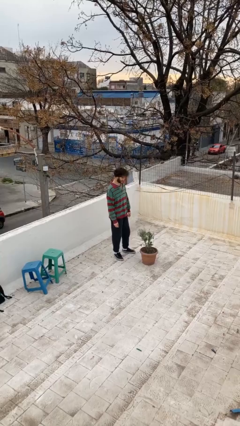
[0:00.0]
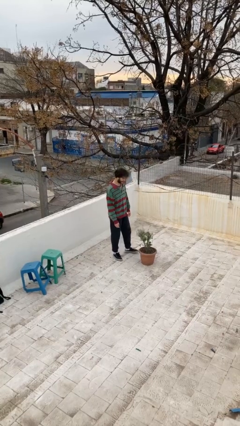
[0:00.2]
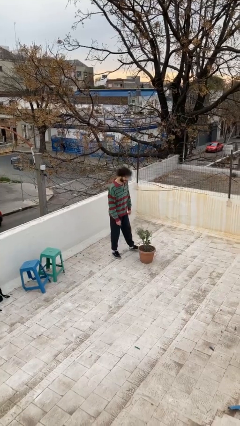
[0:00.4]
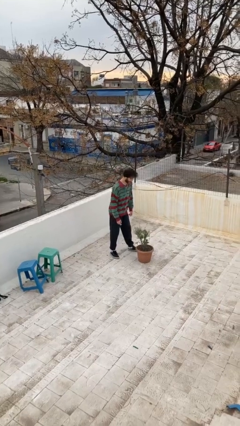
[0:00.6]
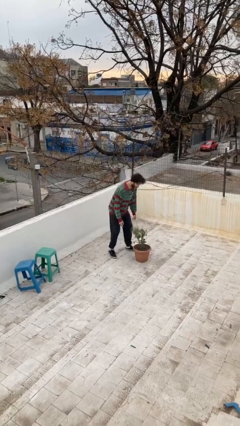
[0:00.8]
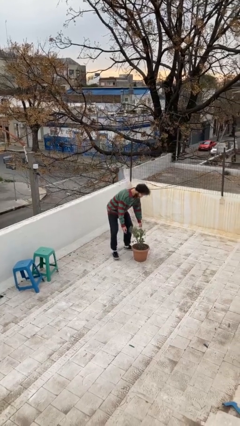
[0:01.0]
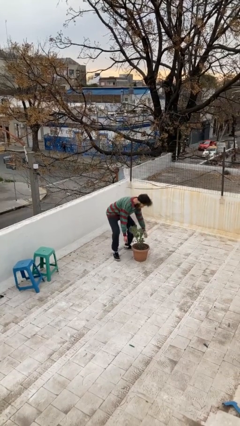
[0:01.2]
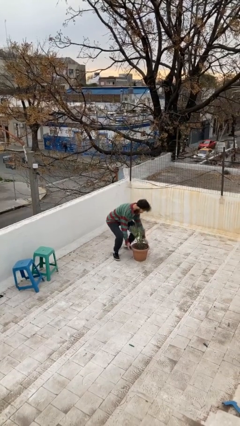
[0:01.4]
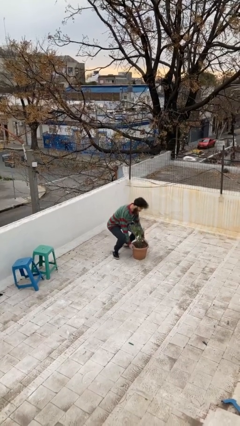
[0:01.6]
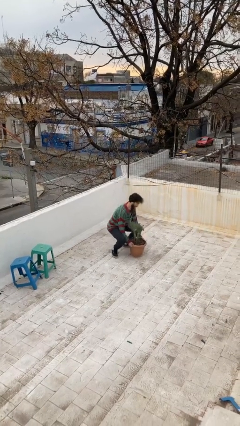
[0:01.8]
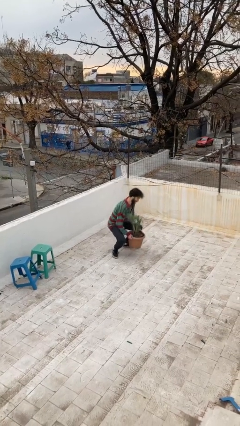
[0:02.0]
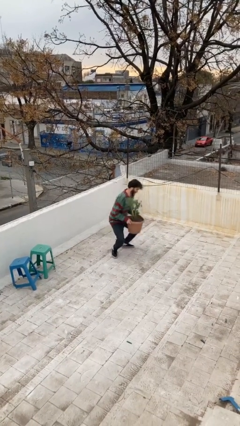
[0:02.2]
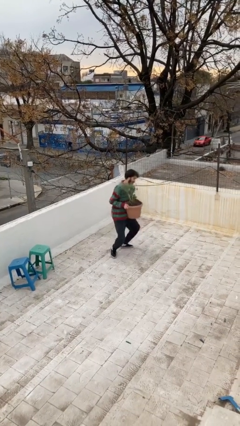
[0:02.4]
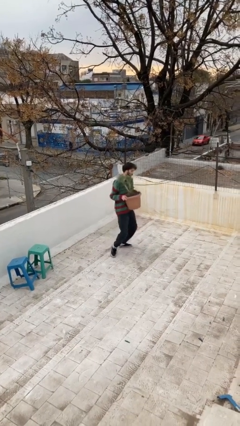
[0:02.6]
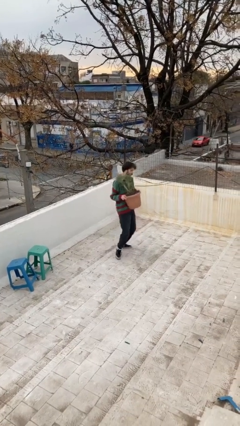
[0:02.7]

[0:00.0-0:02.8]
person picks up object from floor

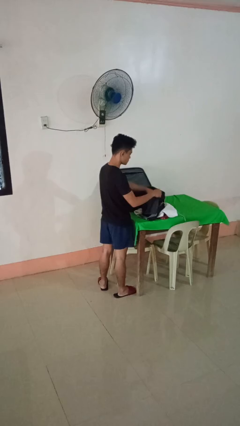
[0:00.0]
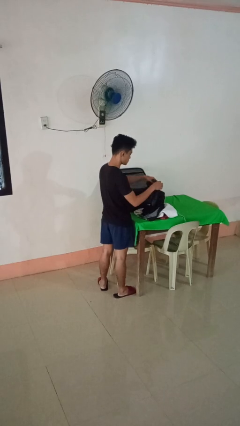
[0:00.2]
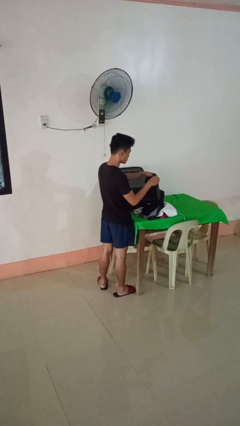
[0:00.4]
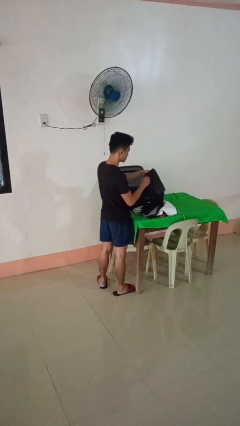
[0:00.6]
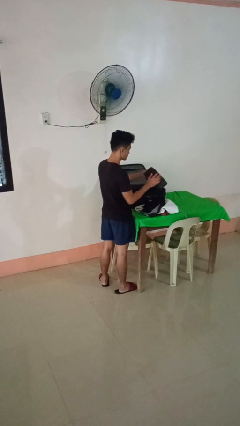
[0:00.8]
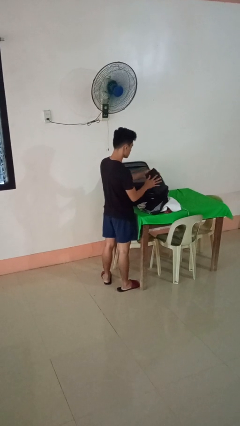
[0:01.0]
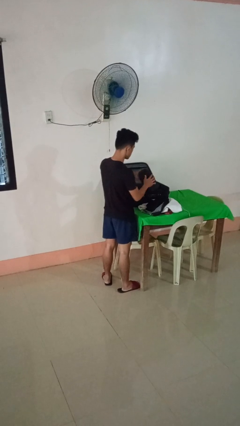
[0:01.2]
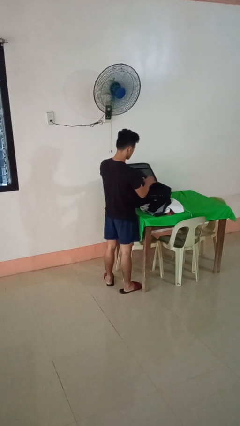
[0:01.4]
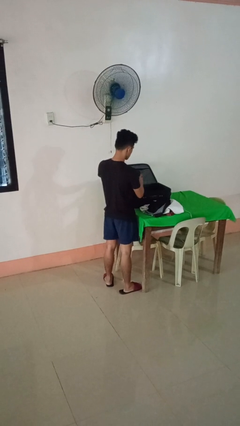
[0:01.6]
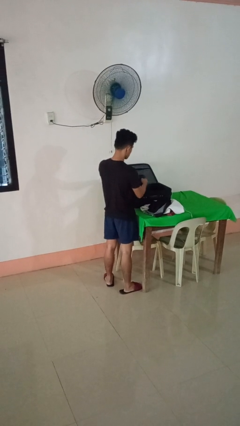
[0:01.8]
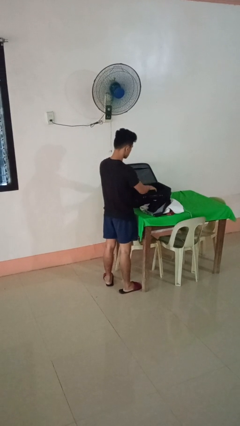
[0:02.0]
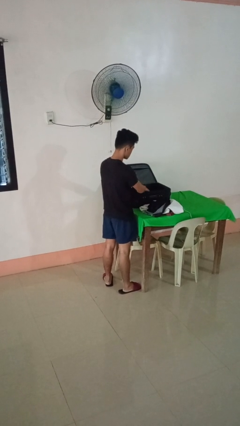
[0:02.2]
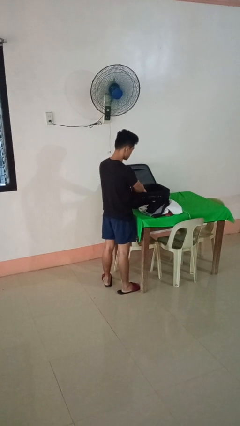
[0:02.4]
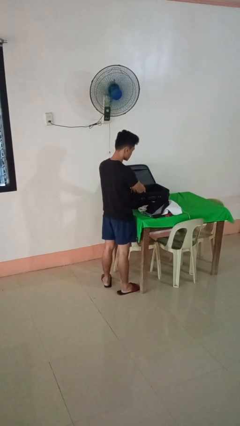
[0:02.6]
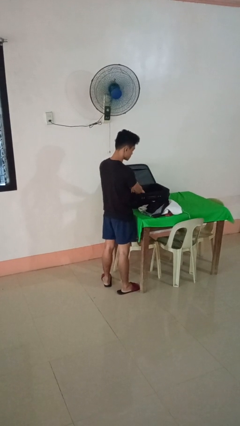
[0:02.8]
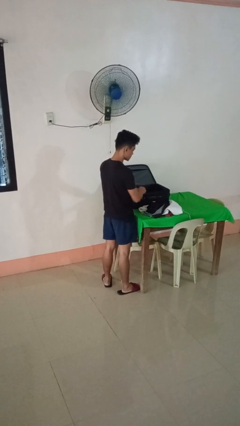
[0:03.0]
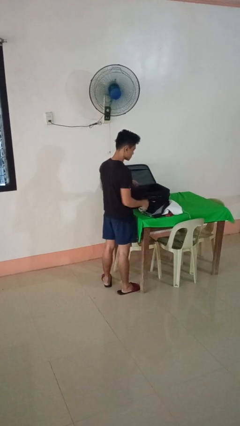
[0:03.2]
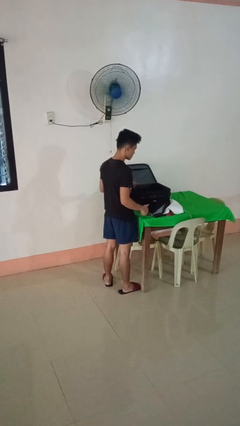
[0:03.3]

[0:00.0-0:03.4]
person loads clothes into suitcase

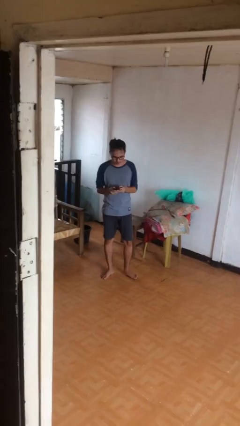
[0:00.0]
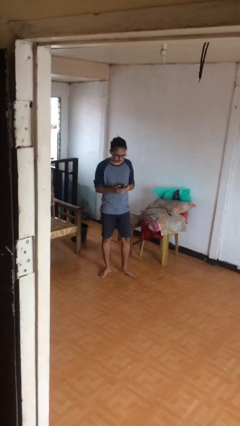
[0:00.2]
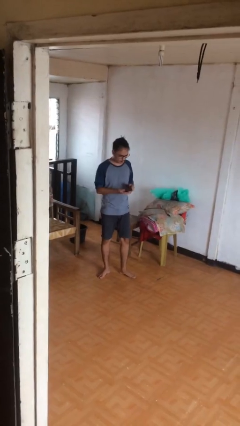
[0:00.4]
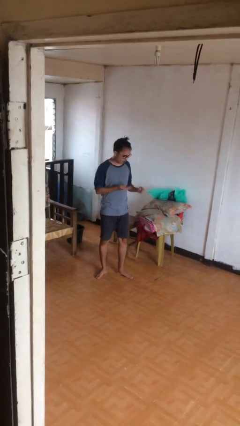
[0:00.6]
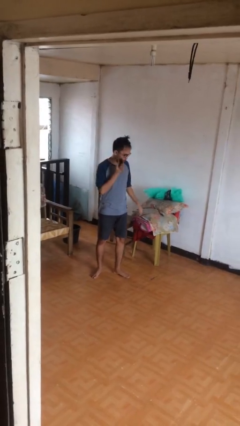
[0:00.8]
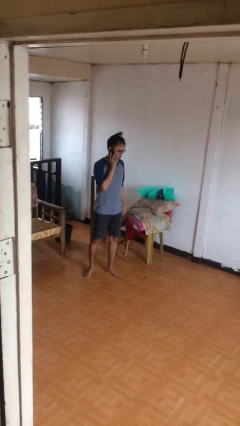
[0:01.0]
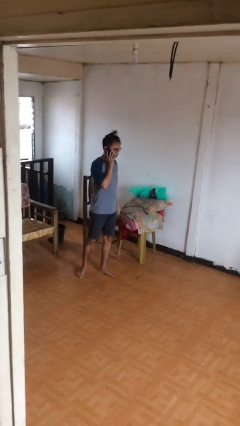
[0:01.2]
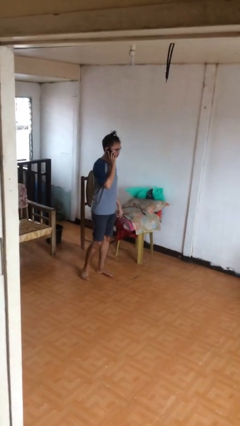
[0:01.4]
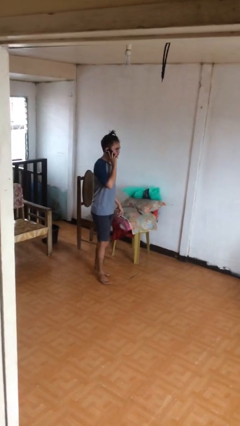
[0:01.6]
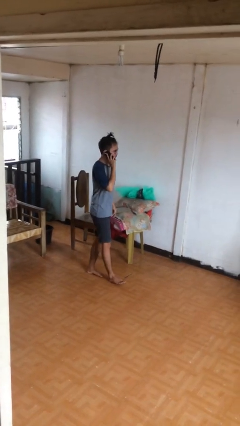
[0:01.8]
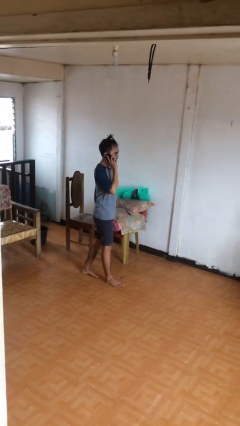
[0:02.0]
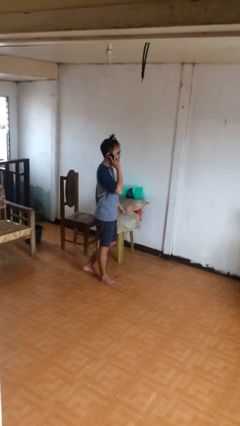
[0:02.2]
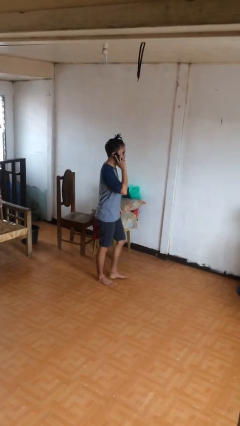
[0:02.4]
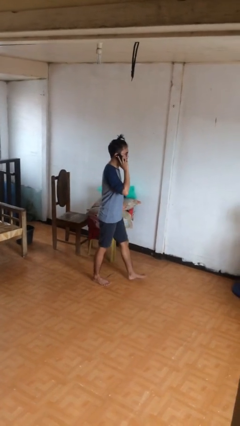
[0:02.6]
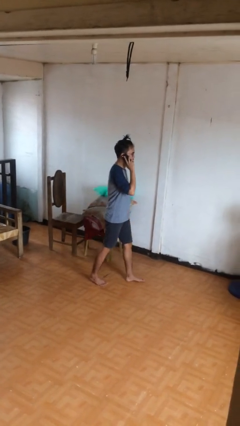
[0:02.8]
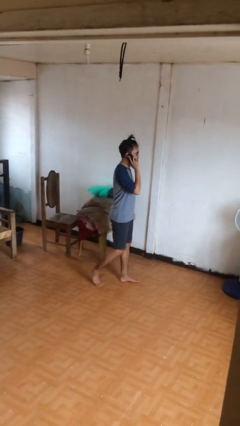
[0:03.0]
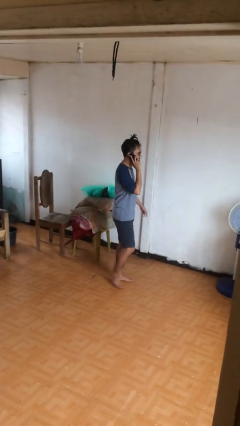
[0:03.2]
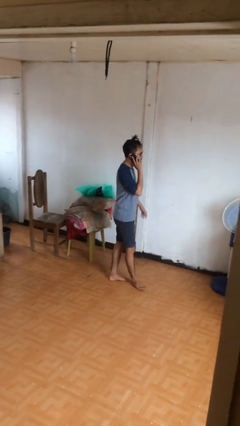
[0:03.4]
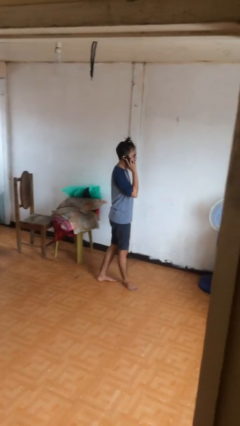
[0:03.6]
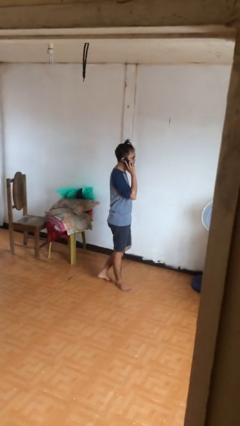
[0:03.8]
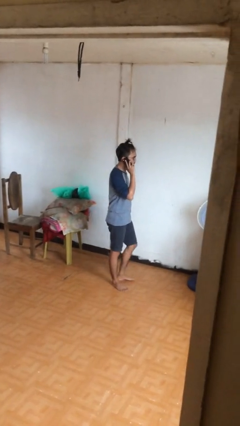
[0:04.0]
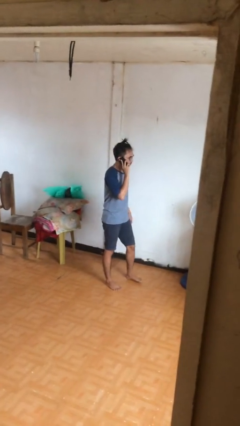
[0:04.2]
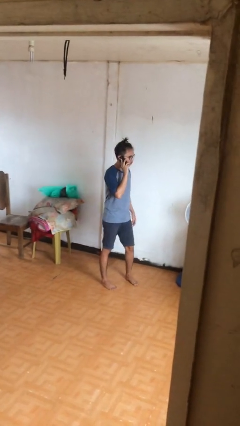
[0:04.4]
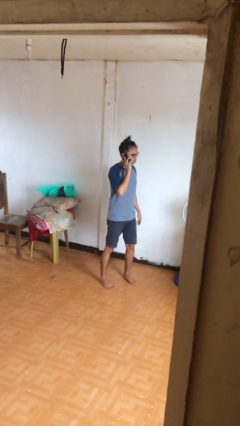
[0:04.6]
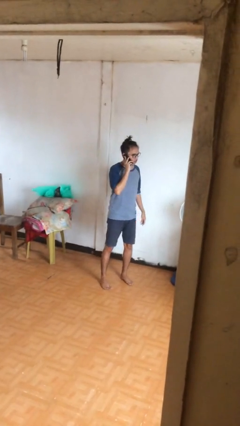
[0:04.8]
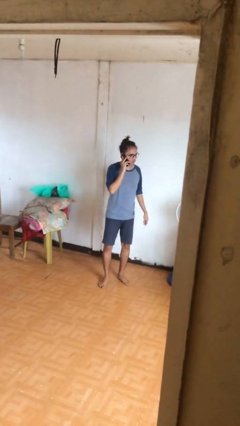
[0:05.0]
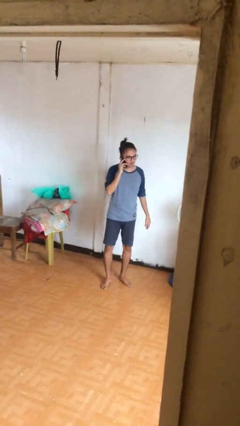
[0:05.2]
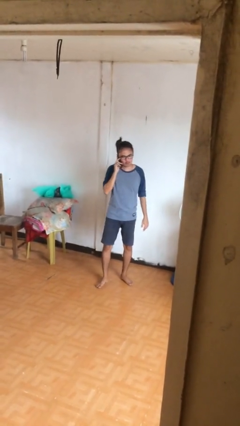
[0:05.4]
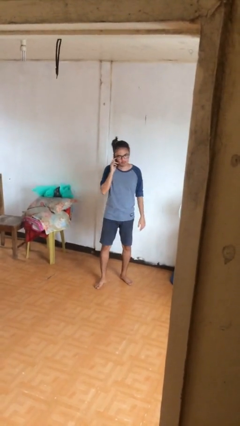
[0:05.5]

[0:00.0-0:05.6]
person talks on phone

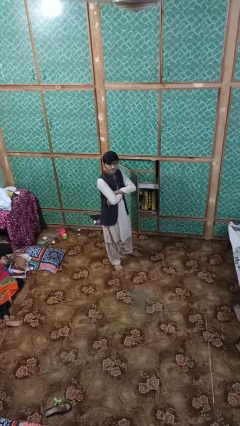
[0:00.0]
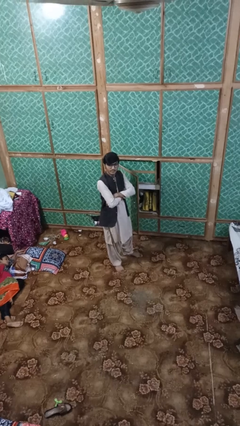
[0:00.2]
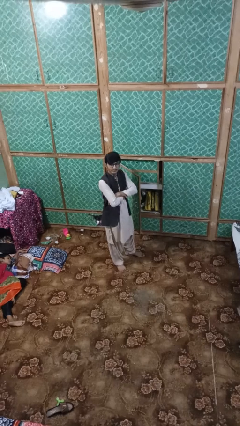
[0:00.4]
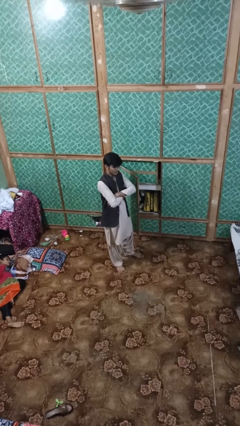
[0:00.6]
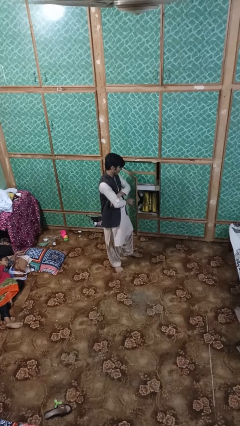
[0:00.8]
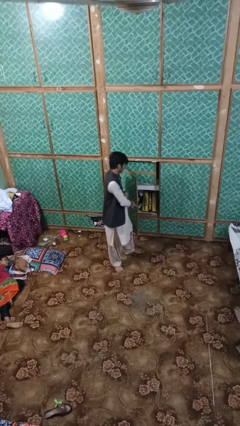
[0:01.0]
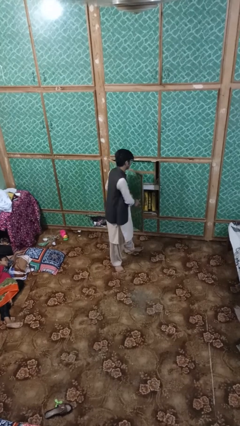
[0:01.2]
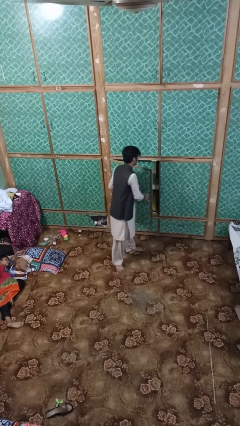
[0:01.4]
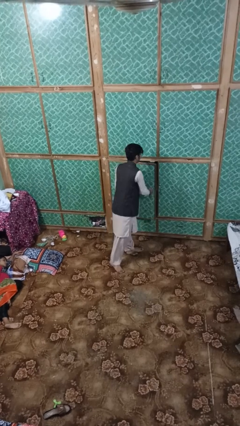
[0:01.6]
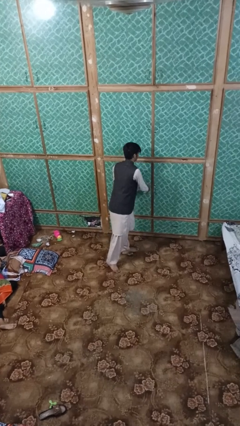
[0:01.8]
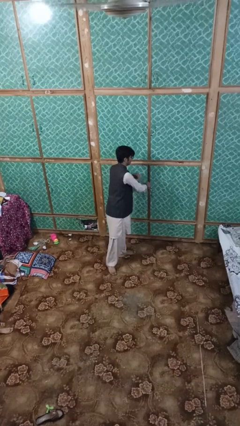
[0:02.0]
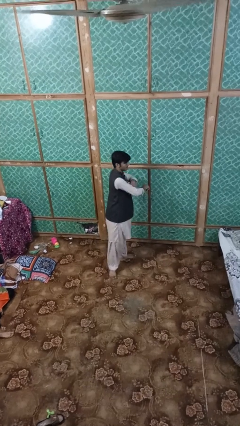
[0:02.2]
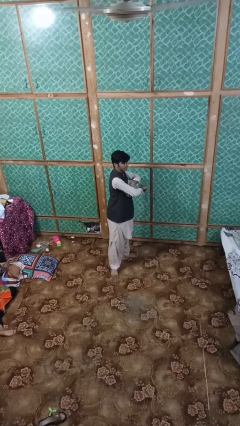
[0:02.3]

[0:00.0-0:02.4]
person closes dresser drawer

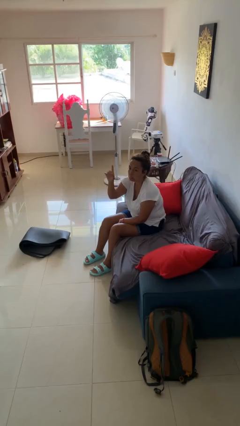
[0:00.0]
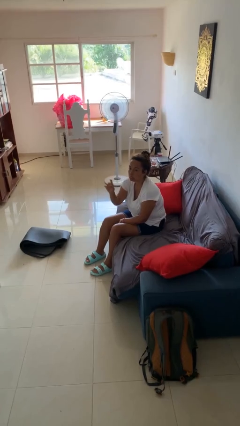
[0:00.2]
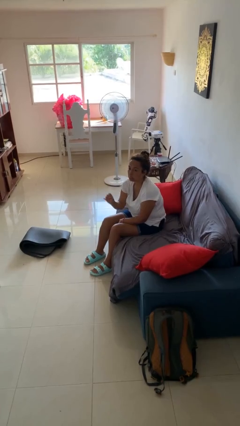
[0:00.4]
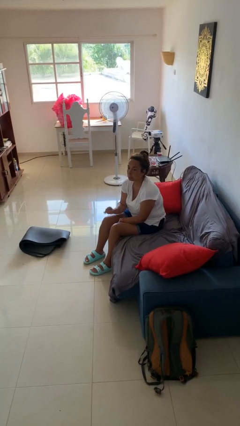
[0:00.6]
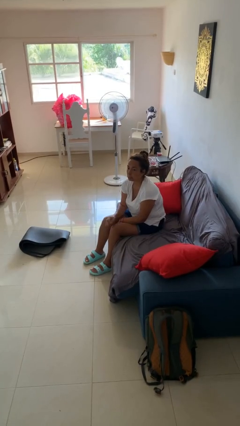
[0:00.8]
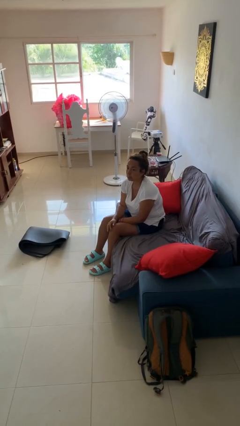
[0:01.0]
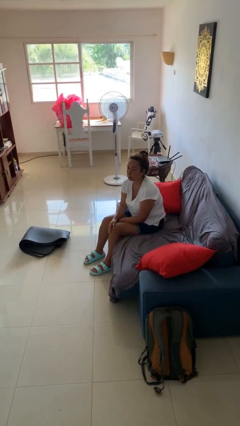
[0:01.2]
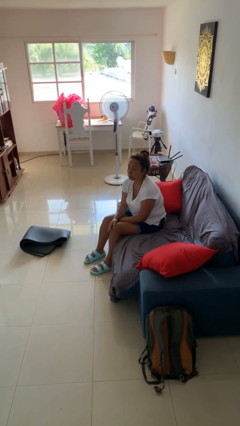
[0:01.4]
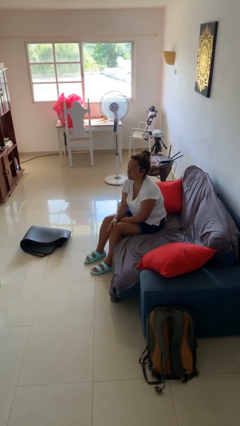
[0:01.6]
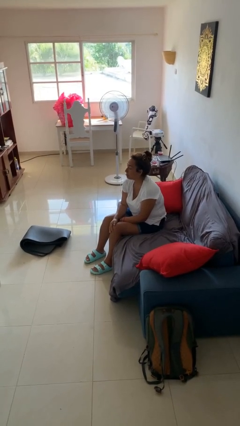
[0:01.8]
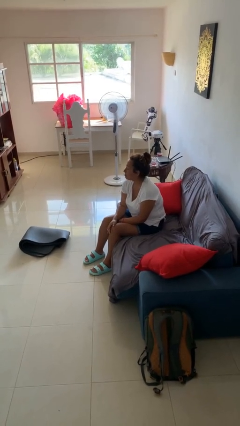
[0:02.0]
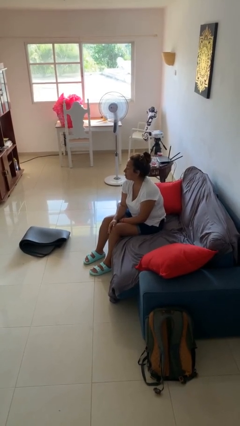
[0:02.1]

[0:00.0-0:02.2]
person gestures lower hand

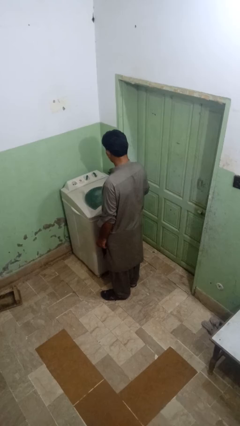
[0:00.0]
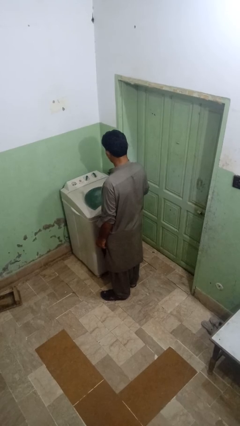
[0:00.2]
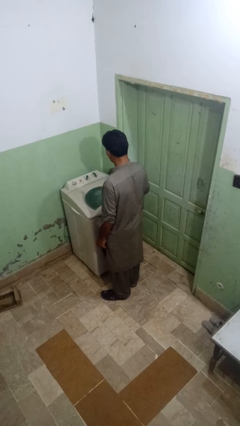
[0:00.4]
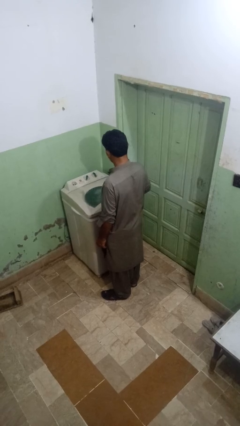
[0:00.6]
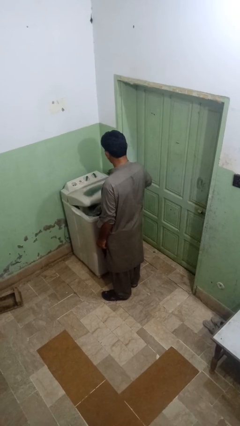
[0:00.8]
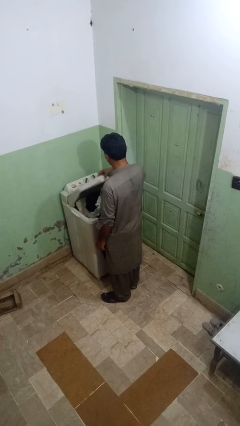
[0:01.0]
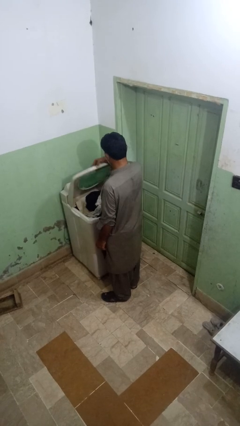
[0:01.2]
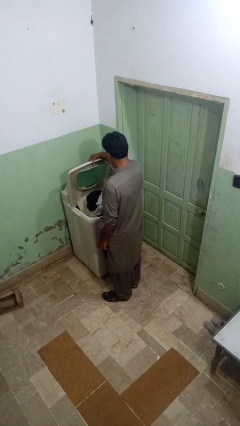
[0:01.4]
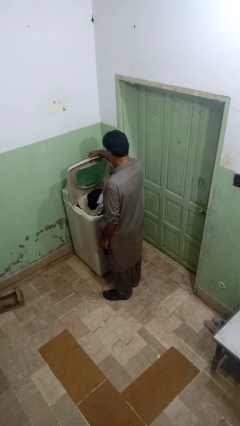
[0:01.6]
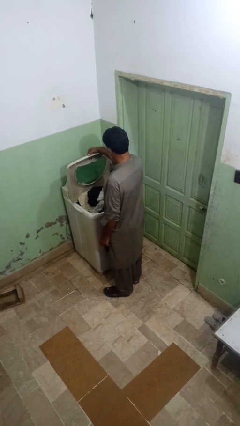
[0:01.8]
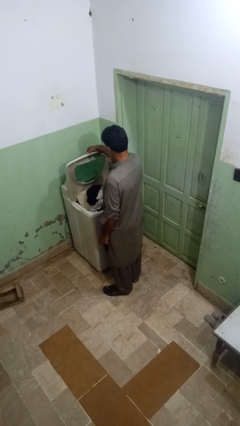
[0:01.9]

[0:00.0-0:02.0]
person opens clothes washer
